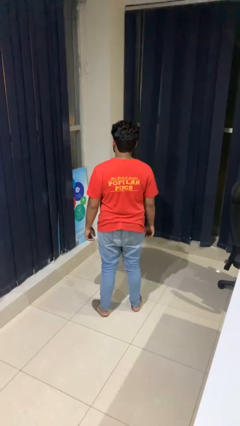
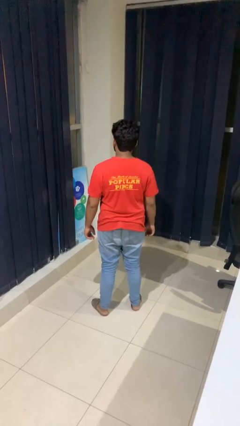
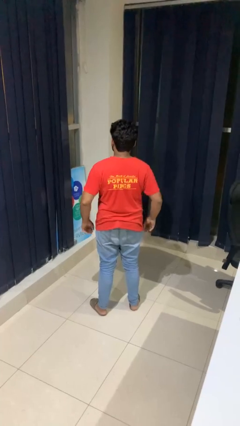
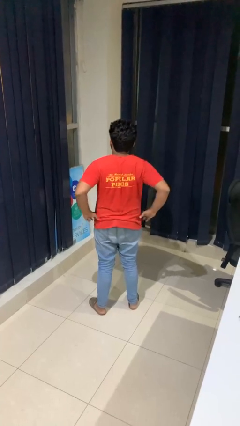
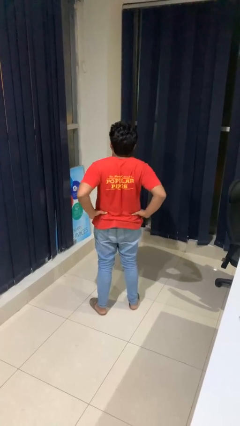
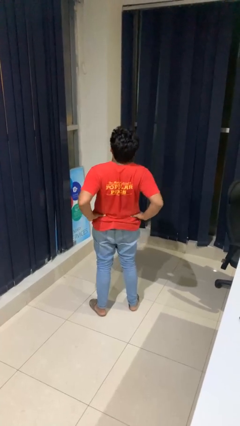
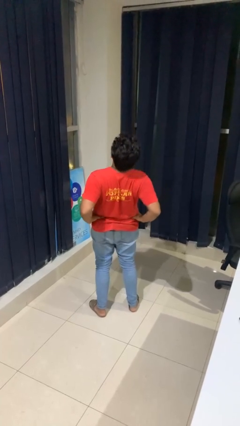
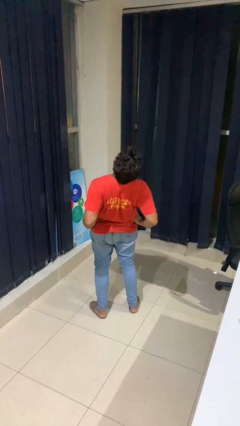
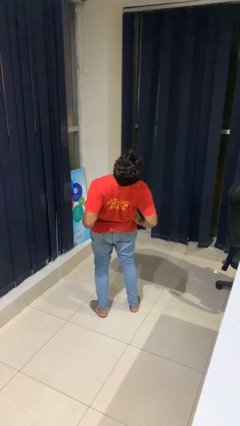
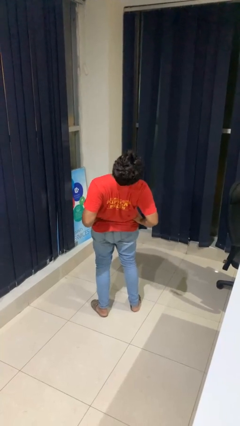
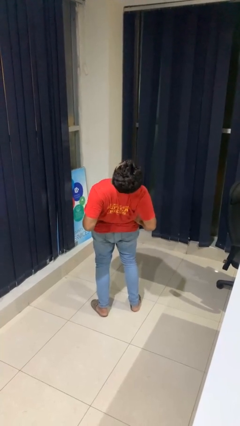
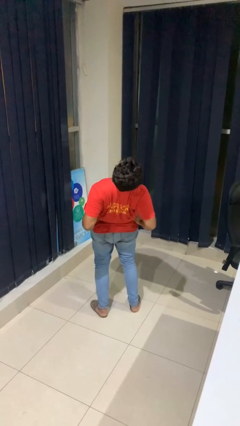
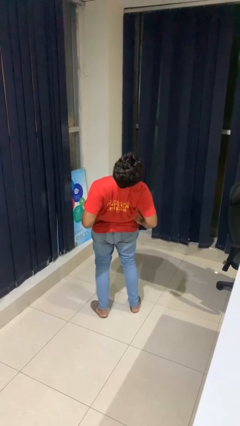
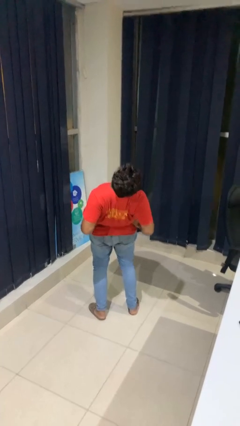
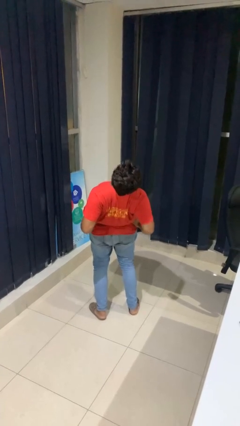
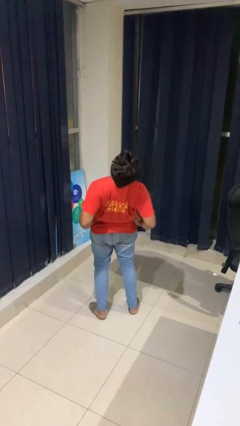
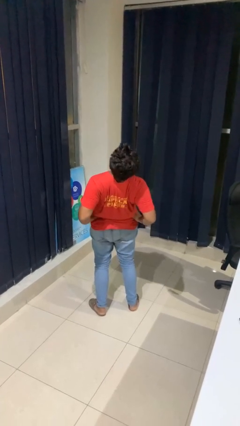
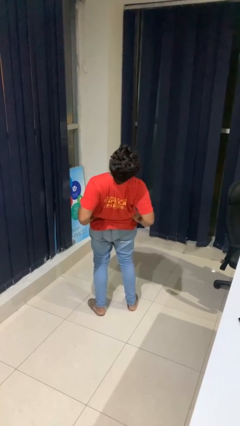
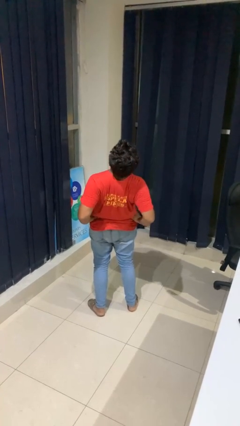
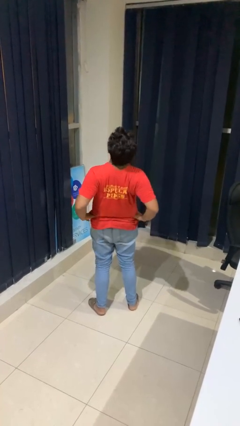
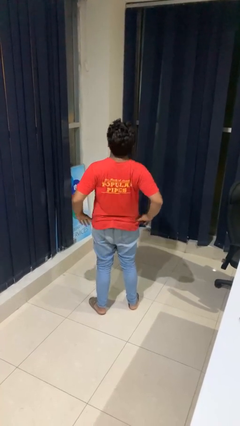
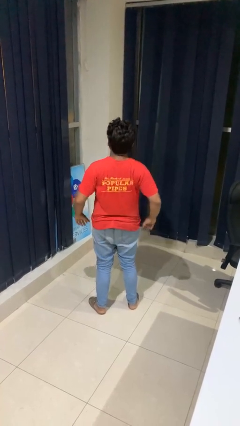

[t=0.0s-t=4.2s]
person stretches back

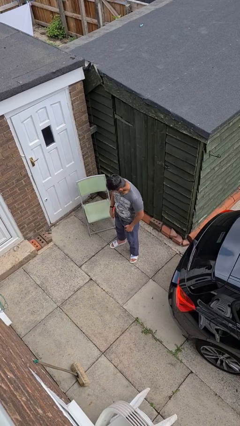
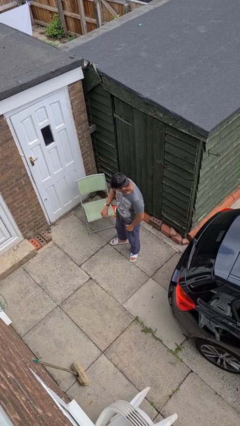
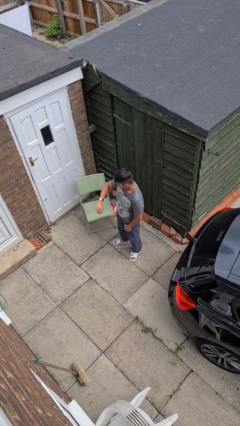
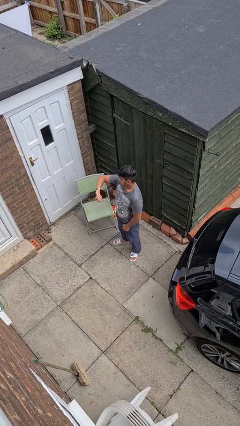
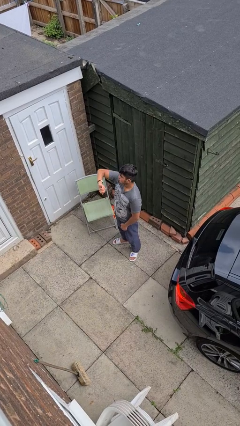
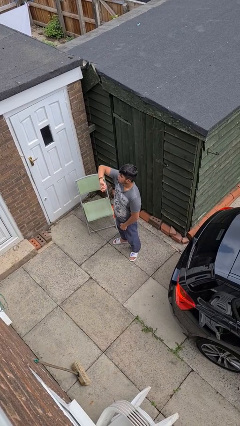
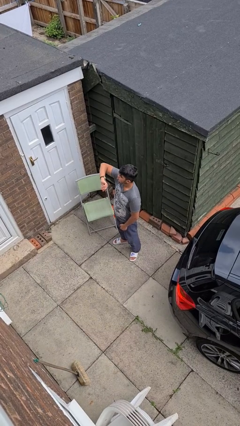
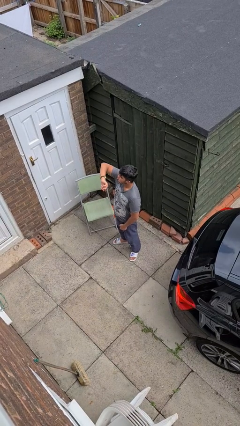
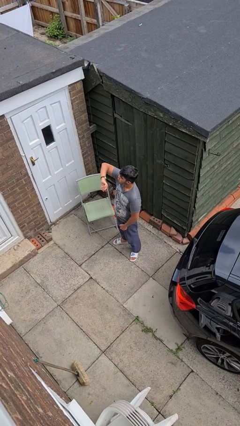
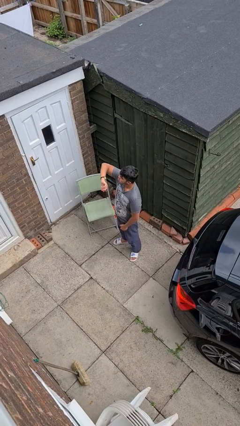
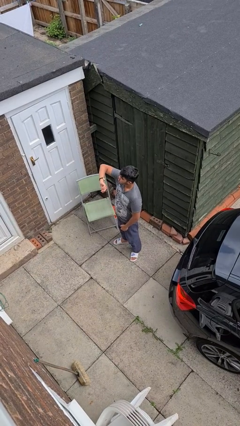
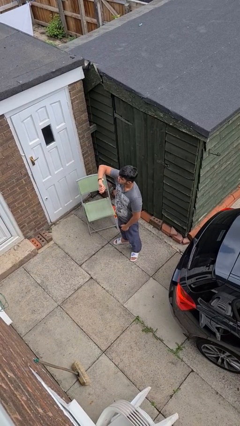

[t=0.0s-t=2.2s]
person looks at wristwatch

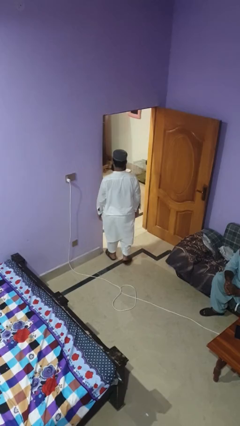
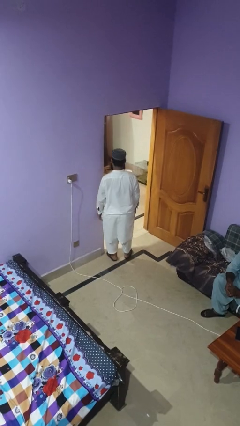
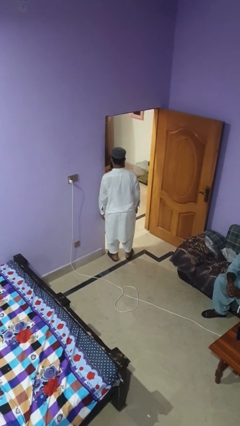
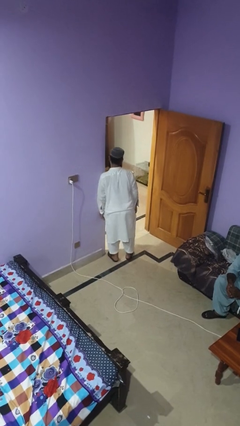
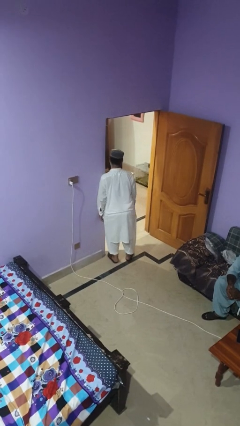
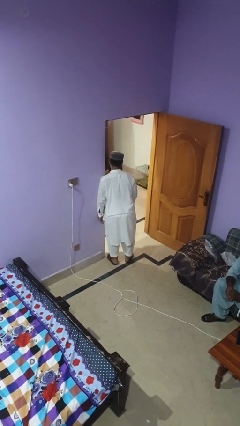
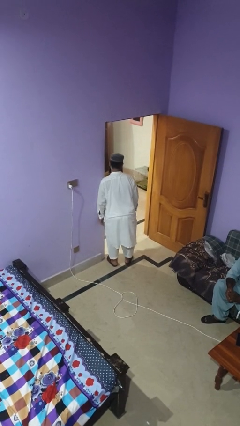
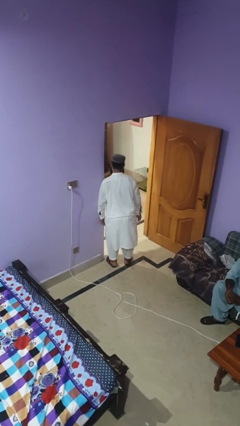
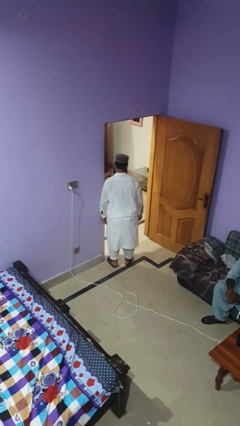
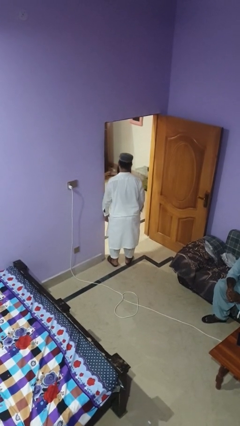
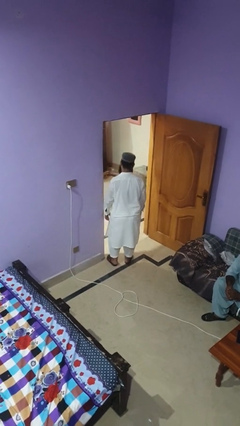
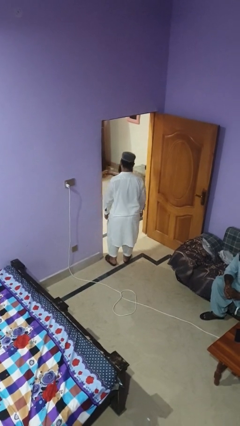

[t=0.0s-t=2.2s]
person bumps into wall

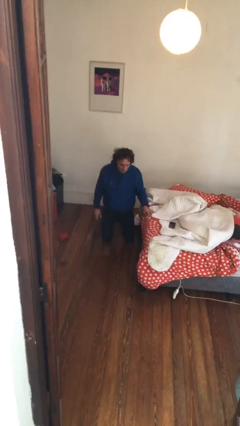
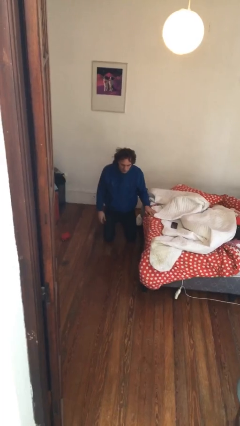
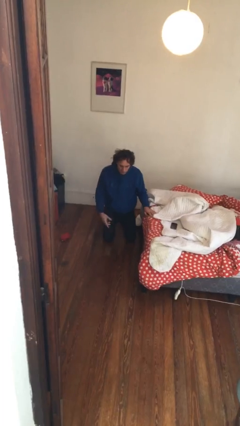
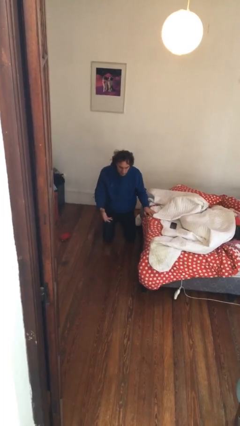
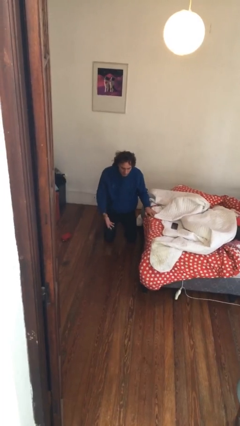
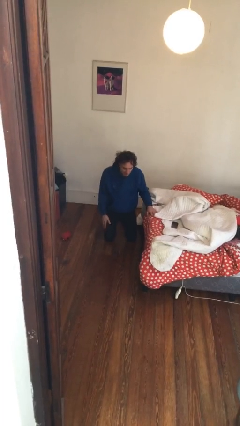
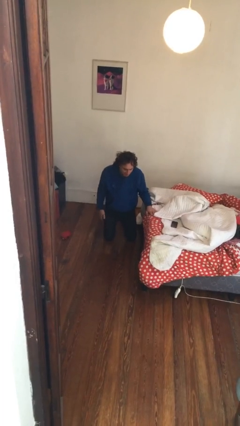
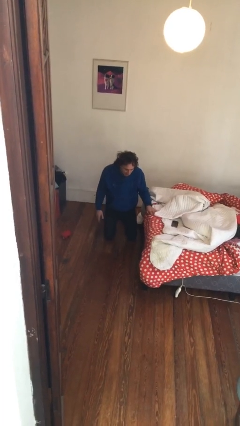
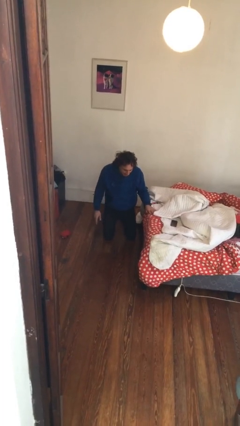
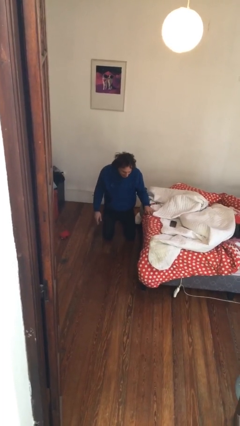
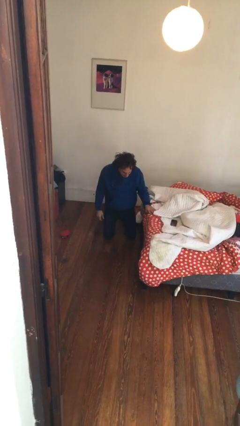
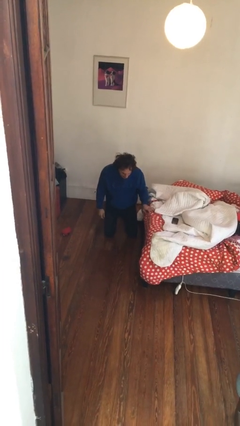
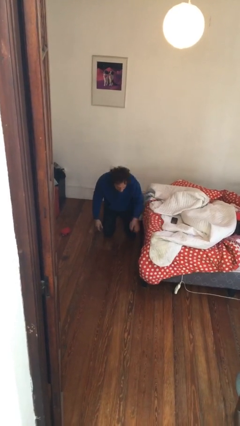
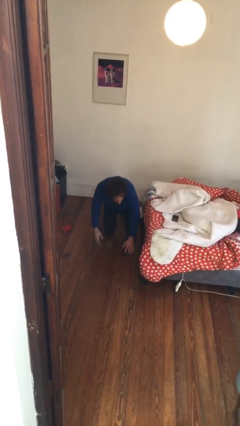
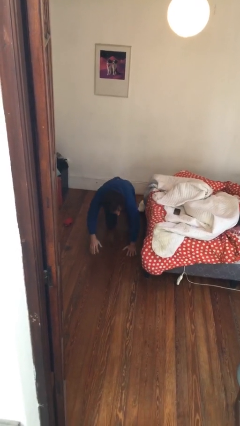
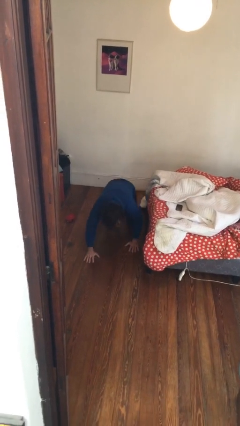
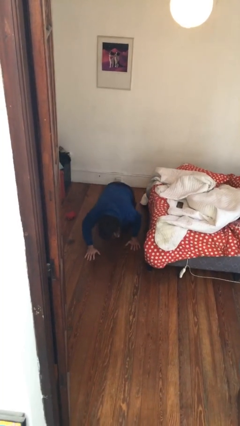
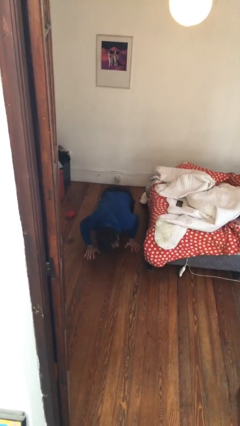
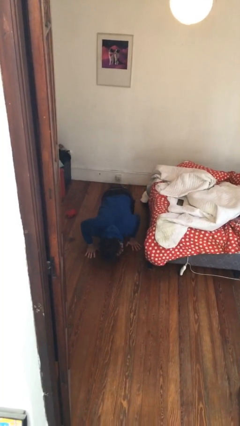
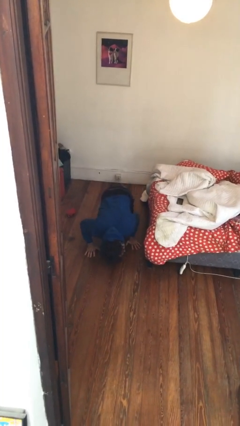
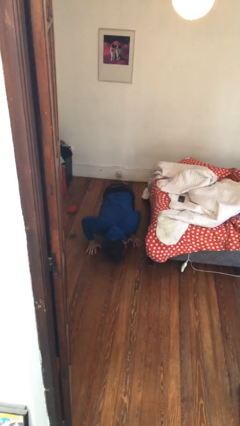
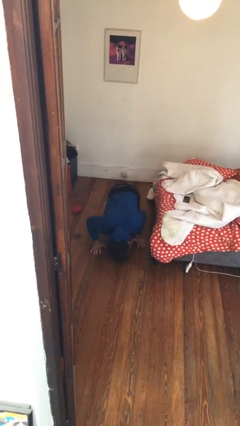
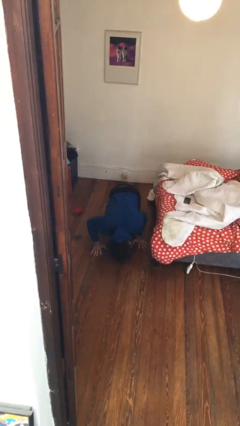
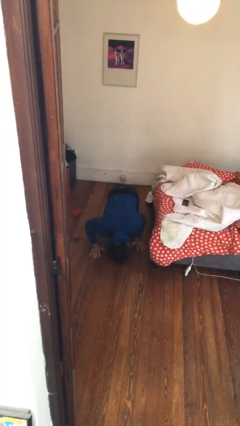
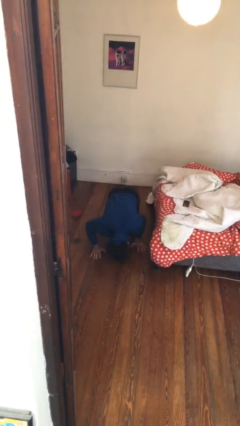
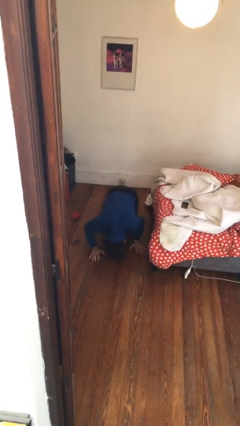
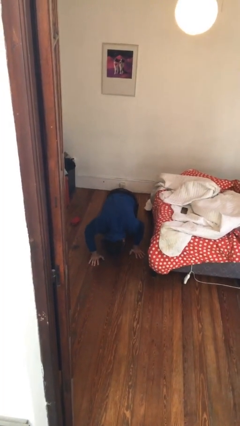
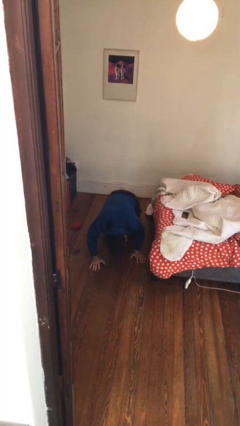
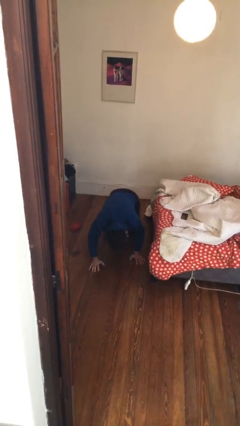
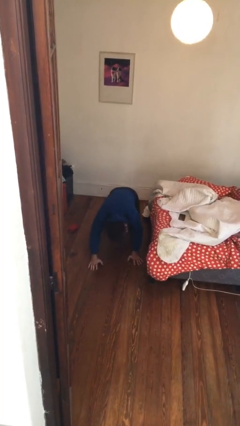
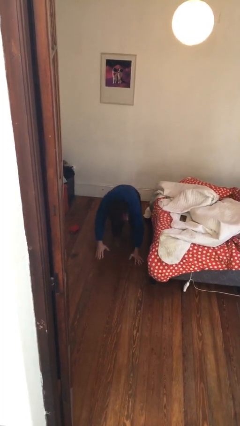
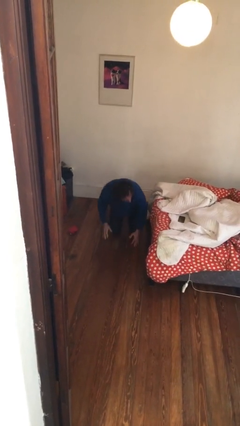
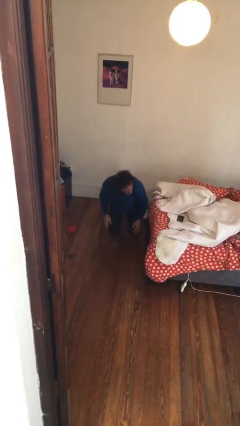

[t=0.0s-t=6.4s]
person searches under bed

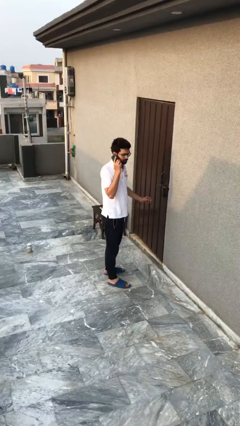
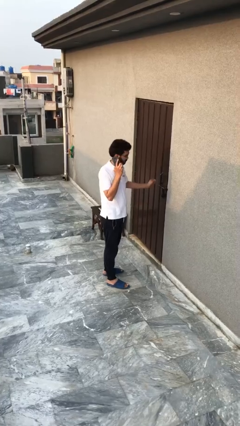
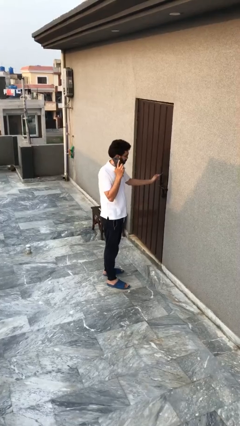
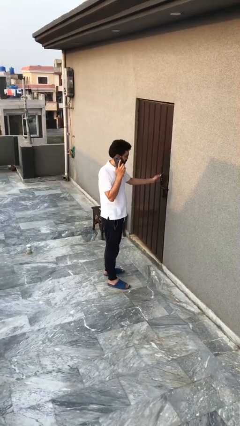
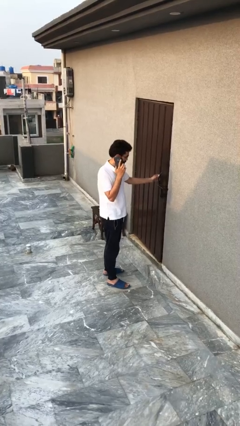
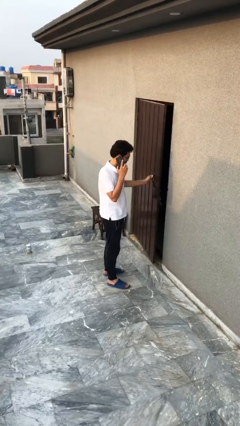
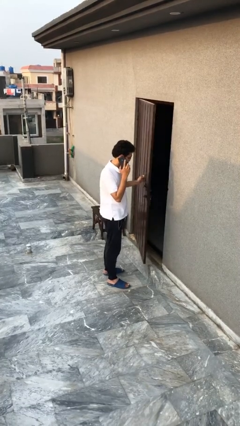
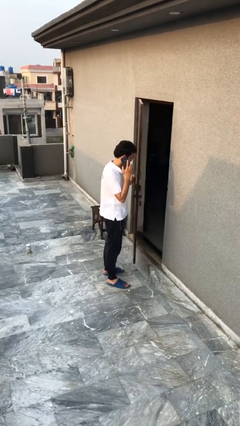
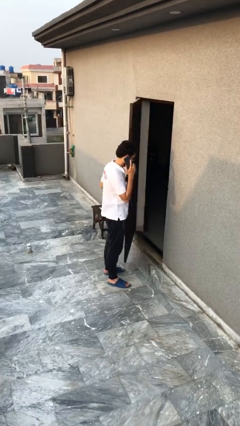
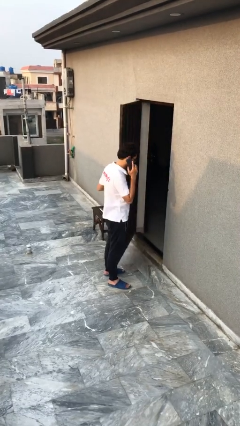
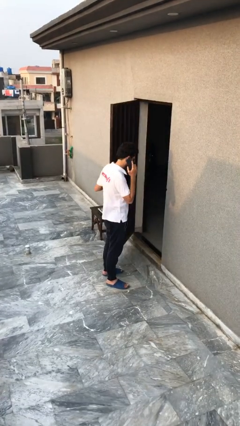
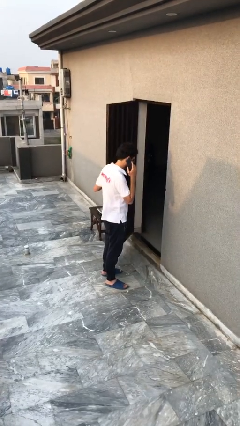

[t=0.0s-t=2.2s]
person opens facility door
